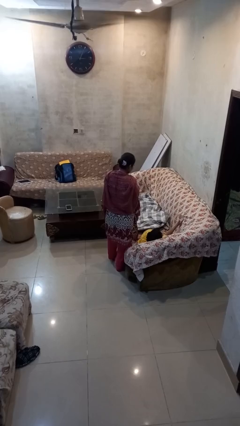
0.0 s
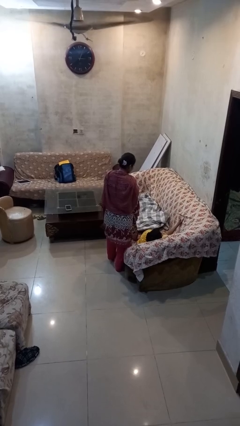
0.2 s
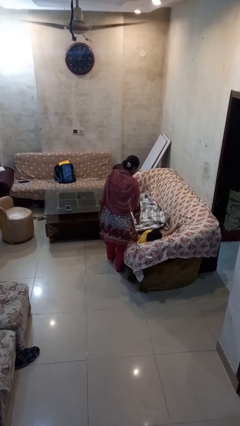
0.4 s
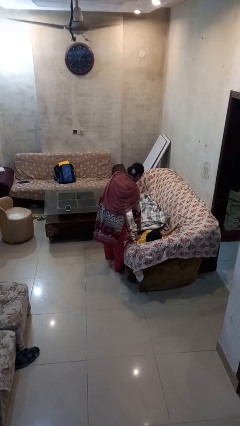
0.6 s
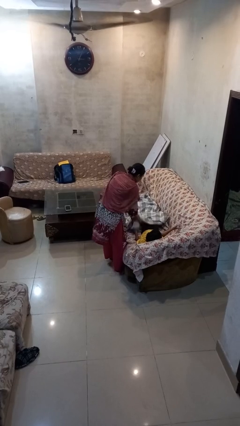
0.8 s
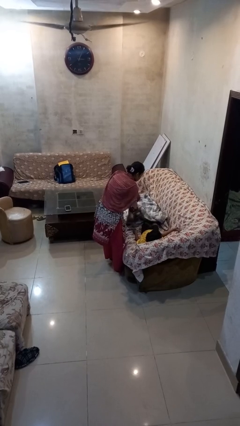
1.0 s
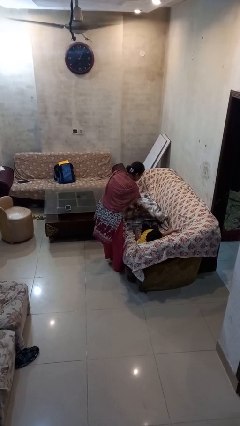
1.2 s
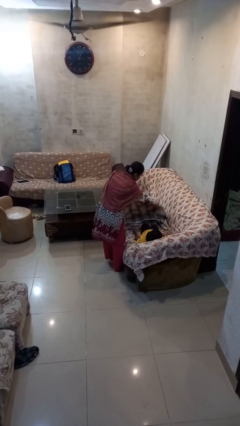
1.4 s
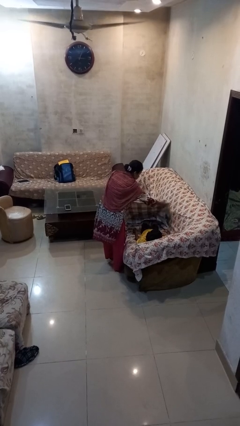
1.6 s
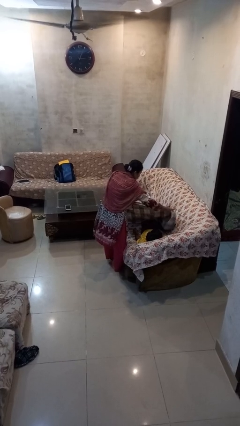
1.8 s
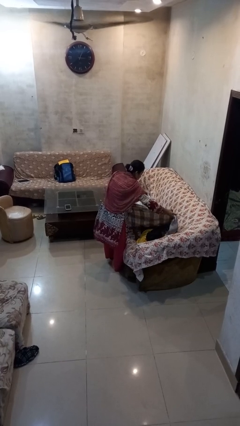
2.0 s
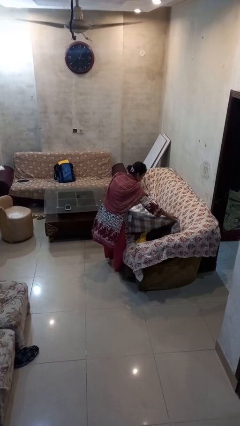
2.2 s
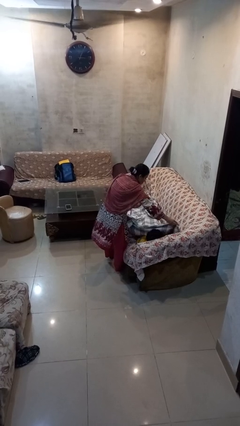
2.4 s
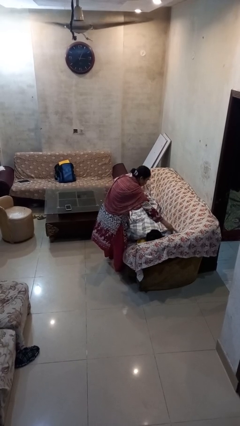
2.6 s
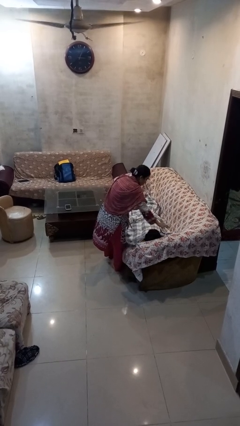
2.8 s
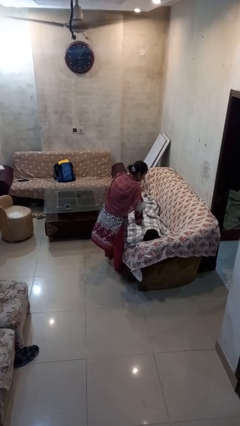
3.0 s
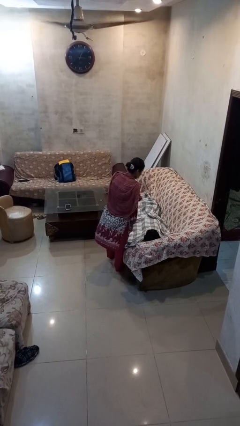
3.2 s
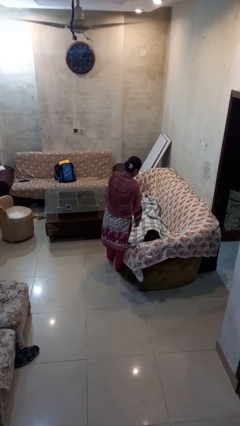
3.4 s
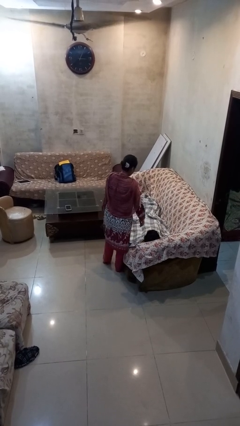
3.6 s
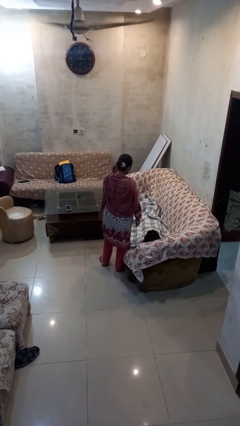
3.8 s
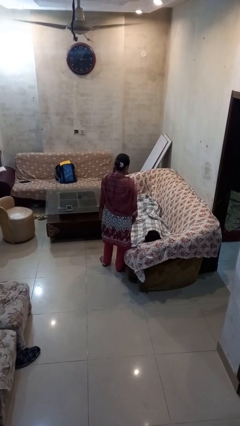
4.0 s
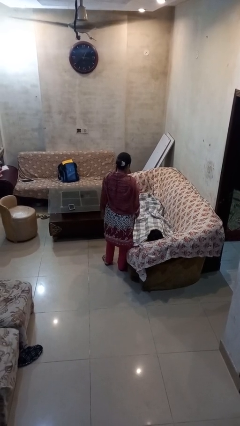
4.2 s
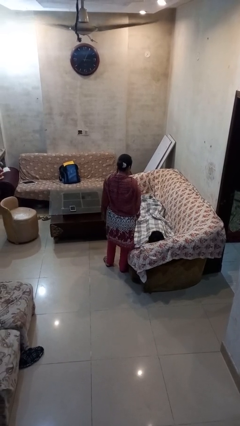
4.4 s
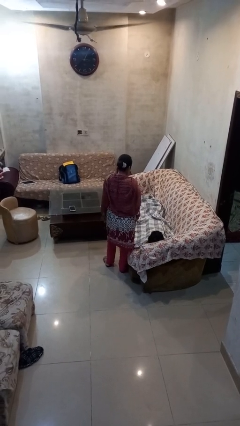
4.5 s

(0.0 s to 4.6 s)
person covers friend with blanket

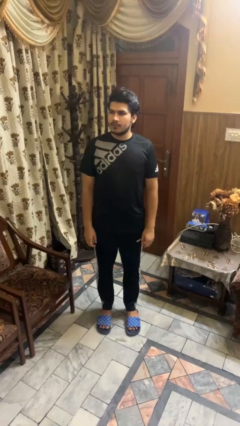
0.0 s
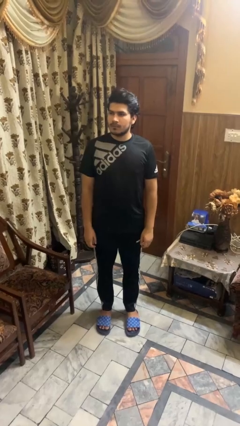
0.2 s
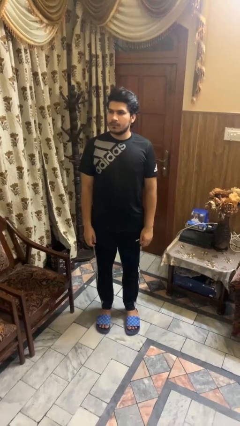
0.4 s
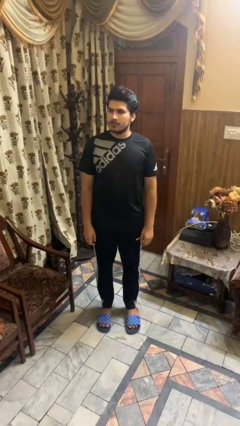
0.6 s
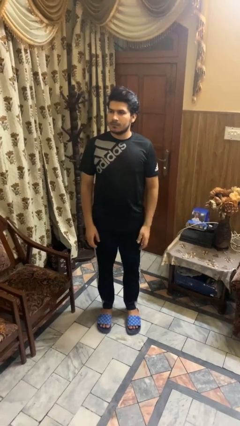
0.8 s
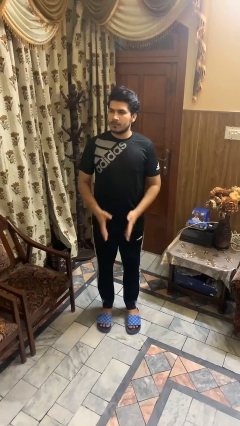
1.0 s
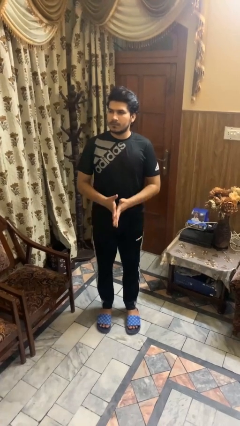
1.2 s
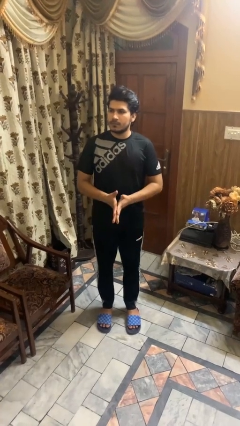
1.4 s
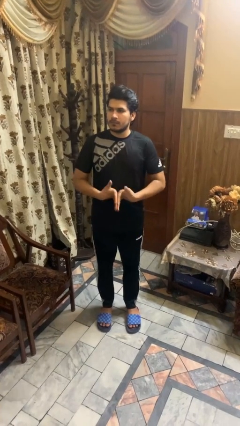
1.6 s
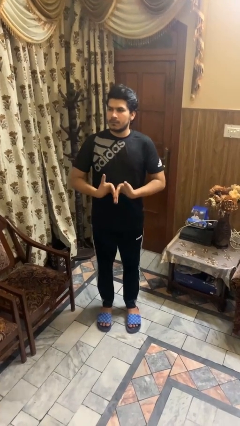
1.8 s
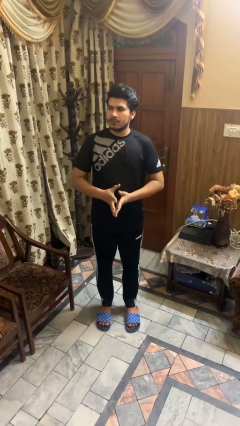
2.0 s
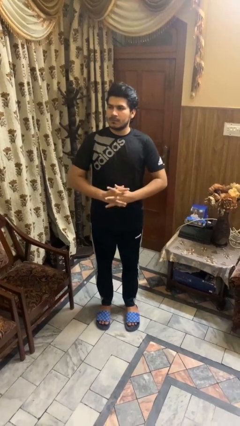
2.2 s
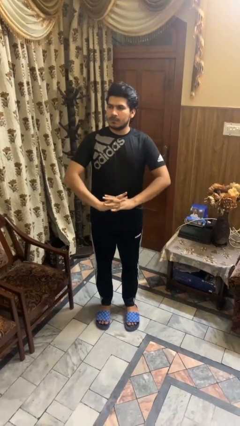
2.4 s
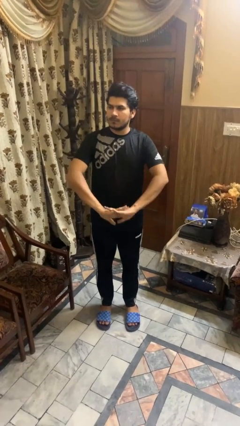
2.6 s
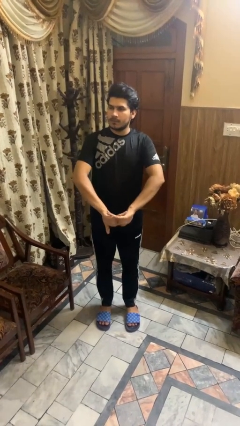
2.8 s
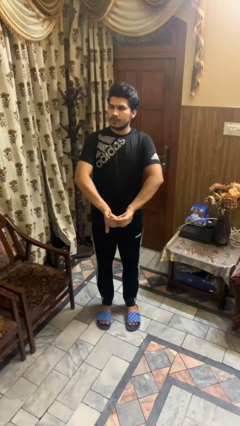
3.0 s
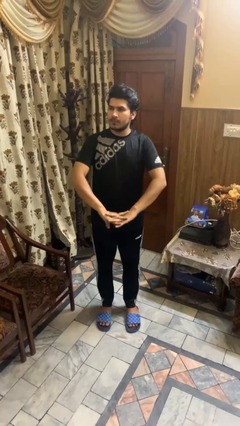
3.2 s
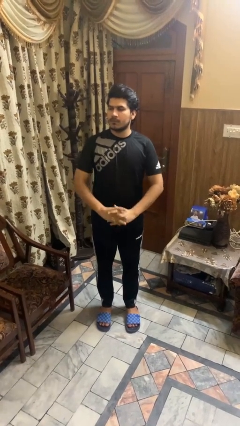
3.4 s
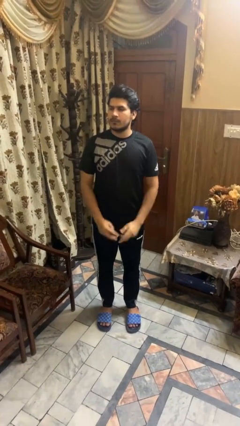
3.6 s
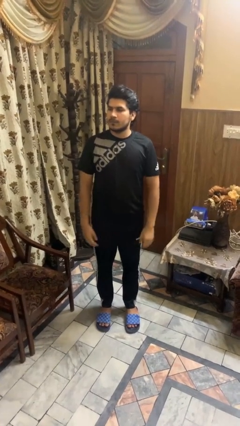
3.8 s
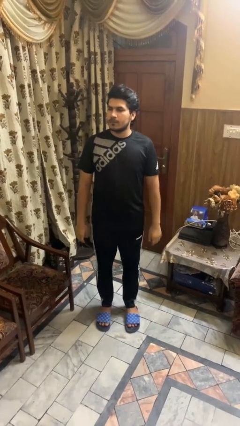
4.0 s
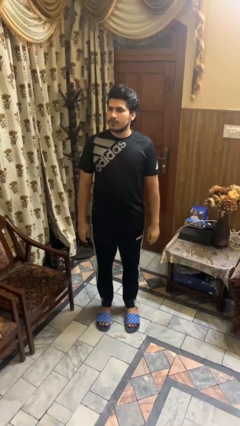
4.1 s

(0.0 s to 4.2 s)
person cracks knuckles

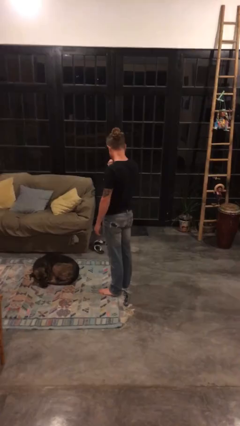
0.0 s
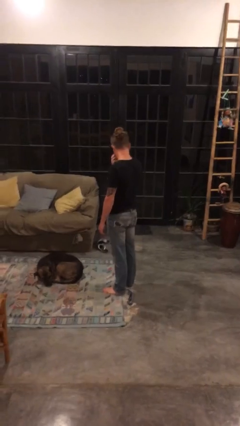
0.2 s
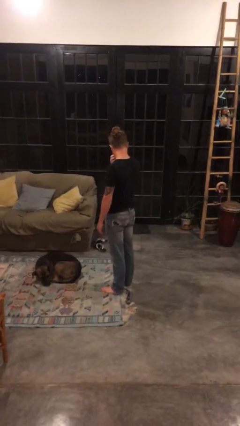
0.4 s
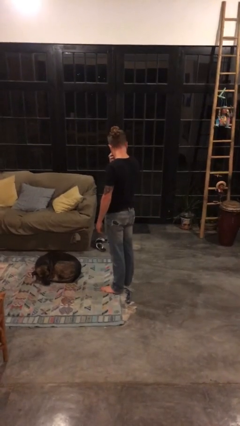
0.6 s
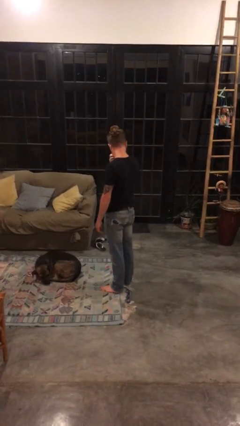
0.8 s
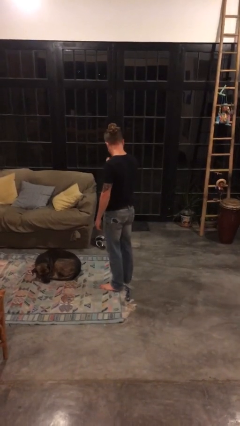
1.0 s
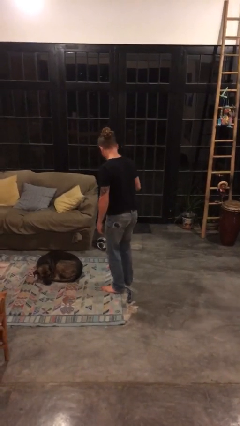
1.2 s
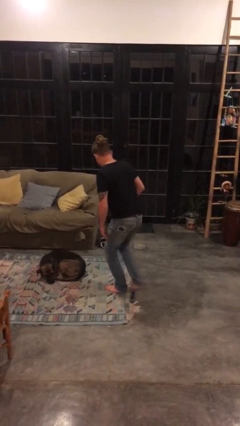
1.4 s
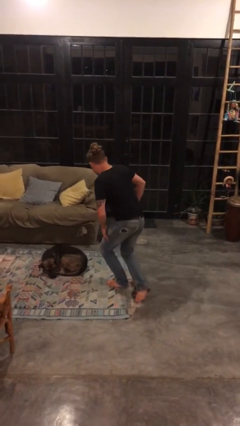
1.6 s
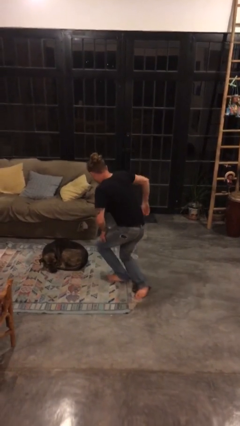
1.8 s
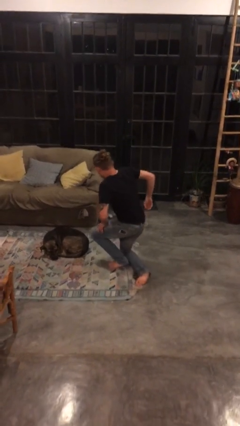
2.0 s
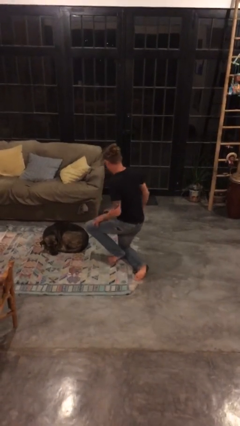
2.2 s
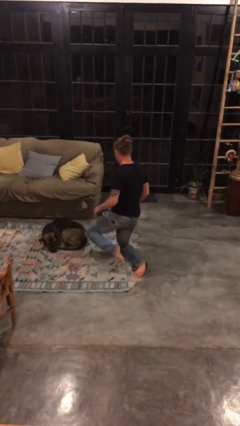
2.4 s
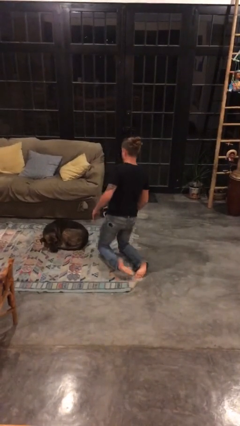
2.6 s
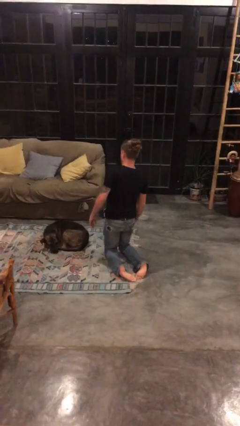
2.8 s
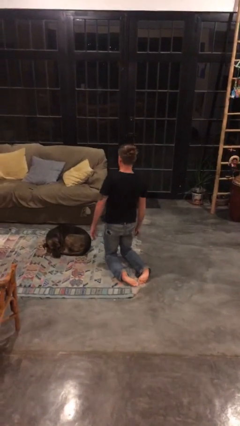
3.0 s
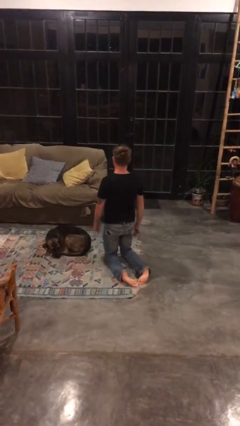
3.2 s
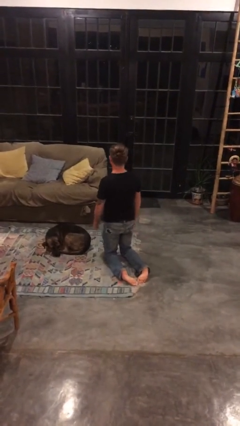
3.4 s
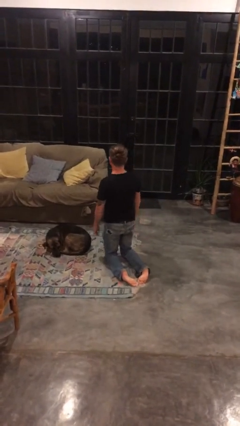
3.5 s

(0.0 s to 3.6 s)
person kneels

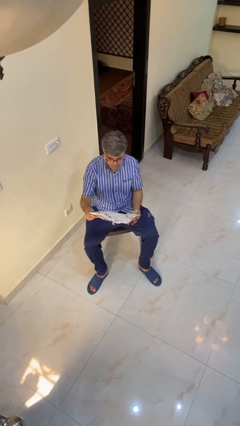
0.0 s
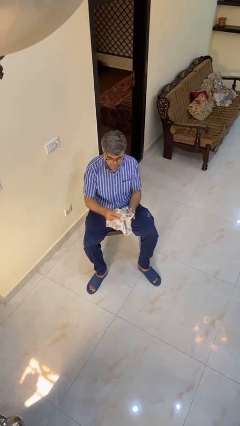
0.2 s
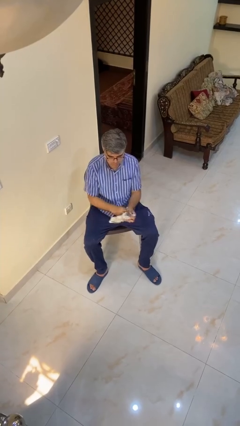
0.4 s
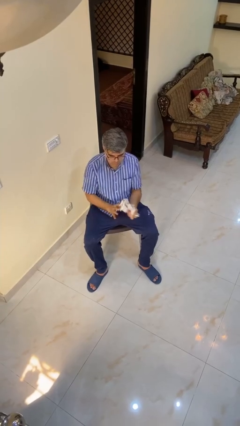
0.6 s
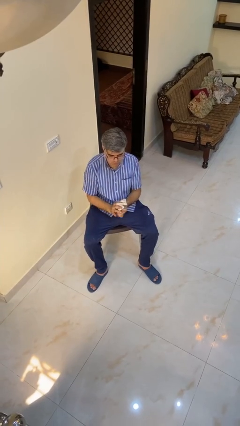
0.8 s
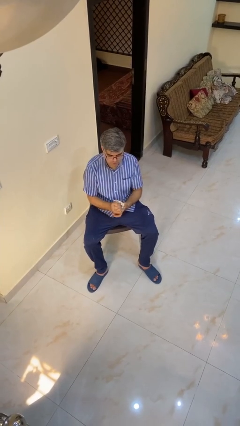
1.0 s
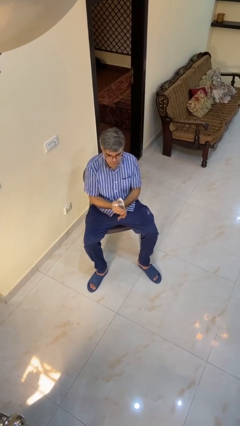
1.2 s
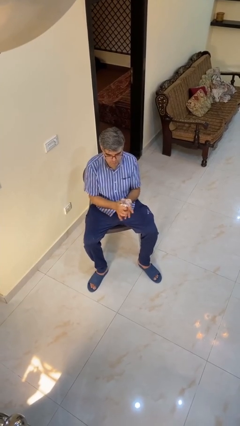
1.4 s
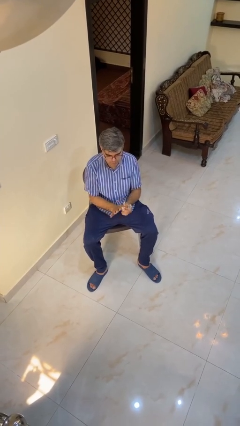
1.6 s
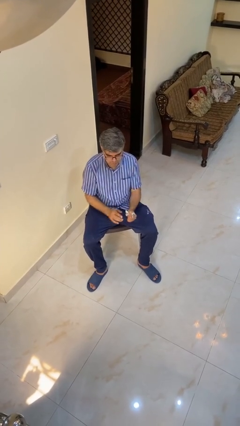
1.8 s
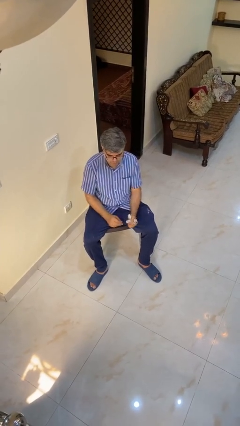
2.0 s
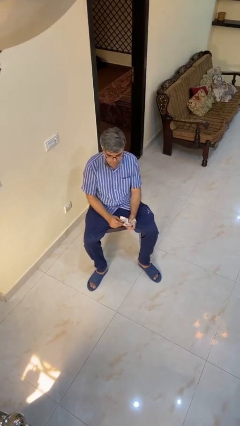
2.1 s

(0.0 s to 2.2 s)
person crumples paper

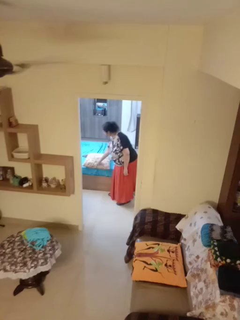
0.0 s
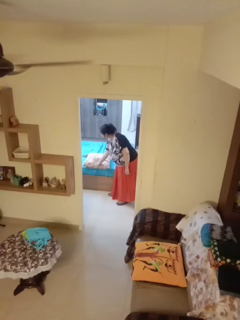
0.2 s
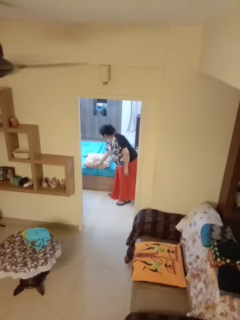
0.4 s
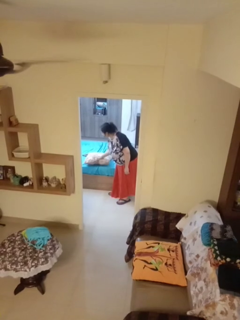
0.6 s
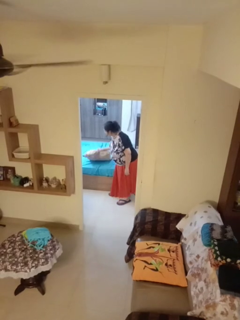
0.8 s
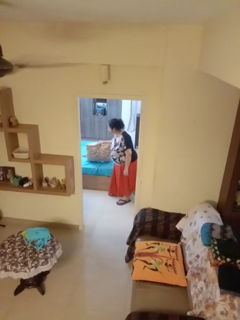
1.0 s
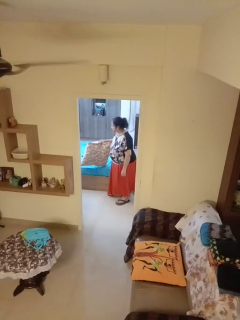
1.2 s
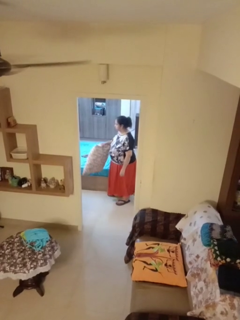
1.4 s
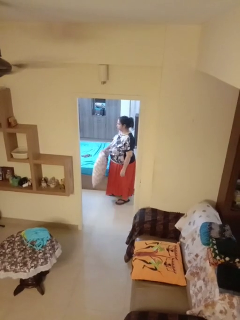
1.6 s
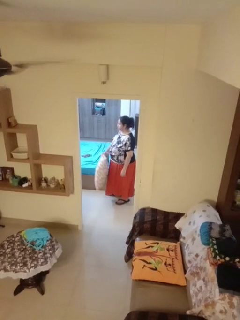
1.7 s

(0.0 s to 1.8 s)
person picks up object from bed

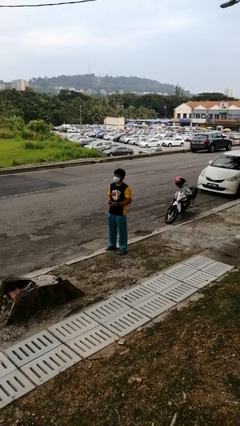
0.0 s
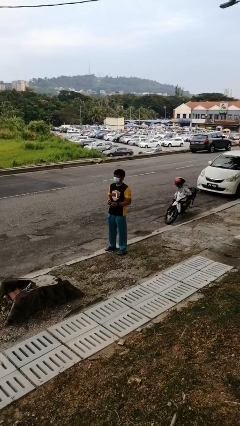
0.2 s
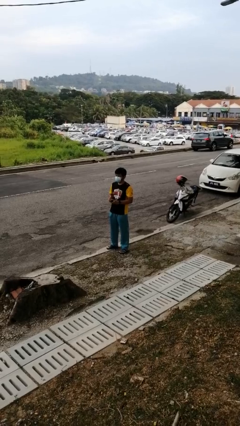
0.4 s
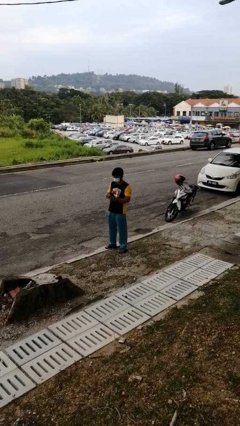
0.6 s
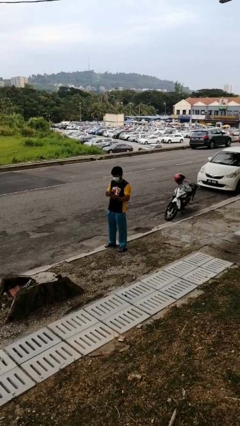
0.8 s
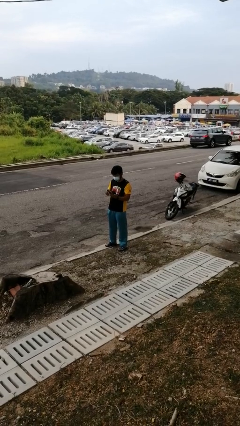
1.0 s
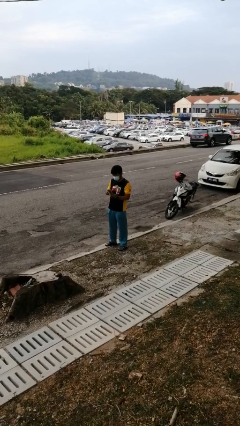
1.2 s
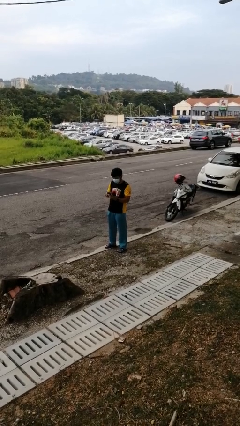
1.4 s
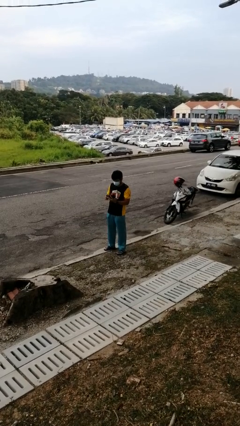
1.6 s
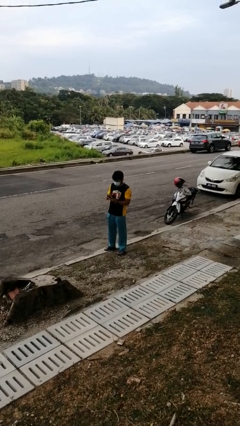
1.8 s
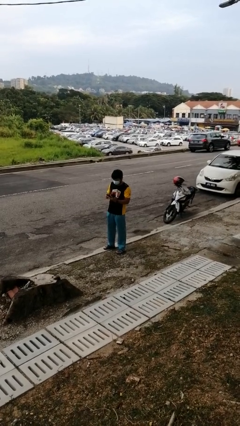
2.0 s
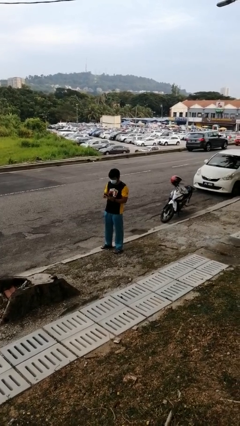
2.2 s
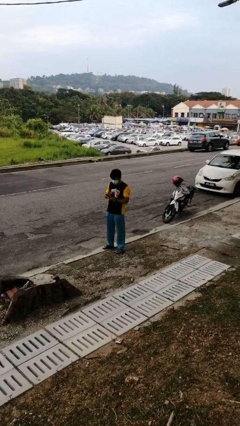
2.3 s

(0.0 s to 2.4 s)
person searches in purse
